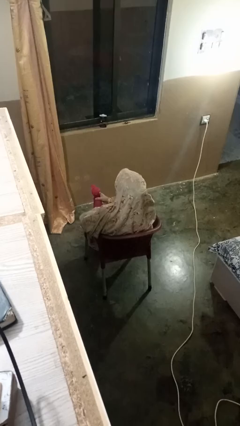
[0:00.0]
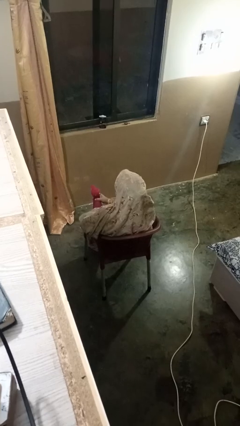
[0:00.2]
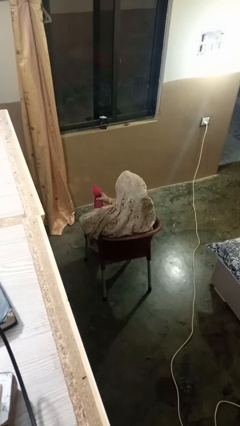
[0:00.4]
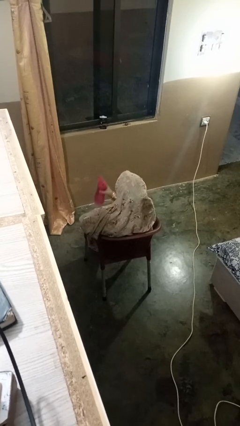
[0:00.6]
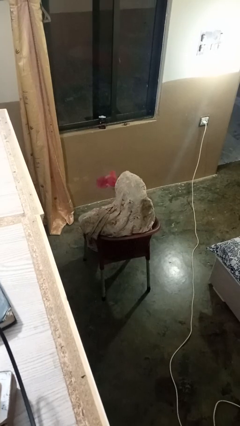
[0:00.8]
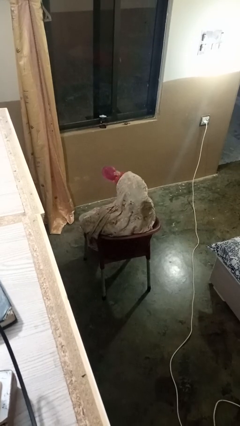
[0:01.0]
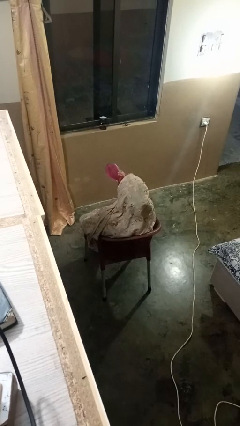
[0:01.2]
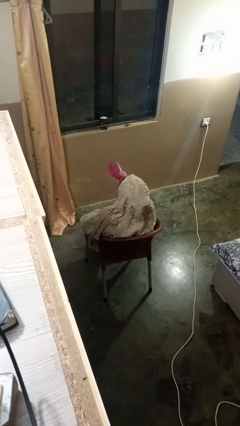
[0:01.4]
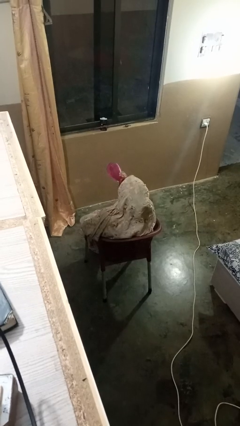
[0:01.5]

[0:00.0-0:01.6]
person drinks from bottle

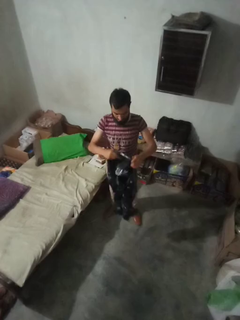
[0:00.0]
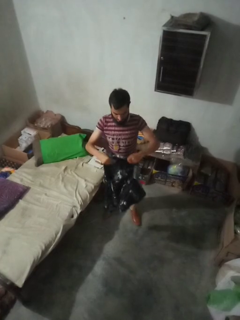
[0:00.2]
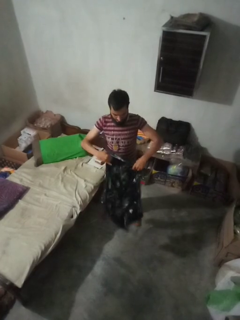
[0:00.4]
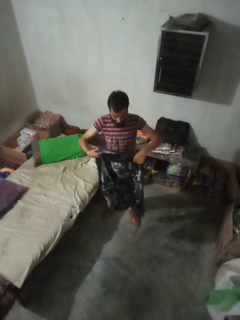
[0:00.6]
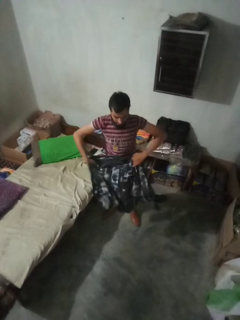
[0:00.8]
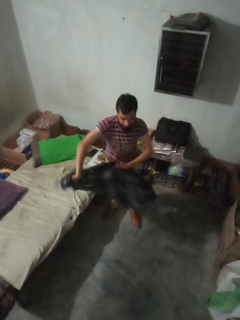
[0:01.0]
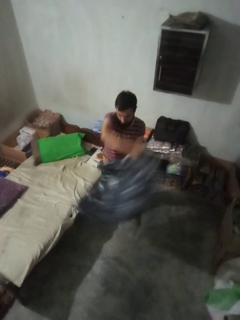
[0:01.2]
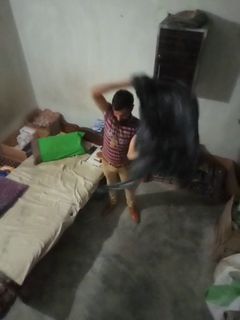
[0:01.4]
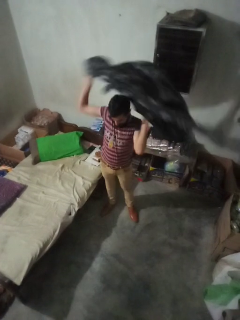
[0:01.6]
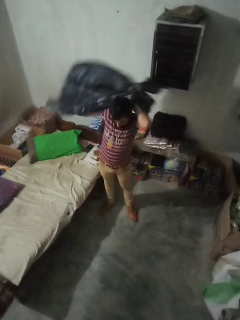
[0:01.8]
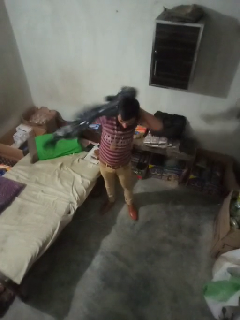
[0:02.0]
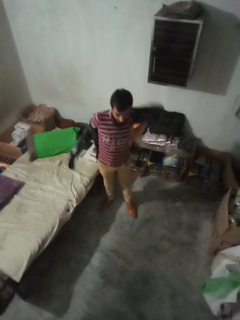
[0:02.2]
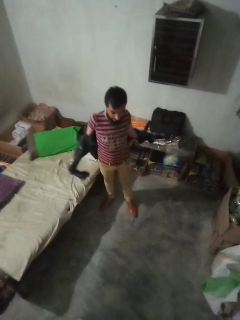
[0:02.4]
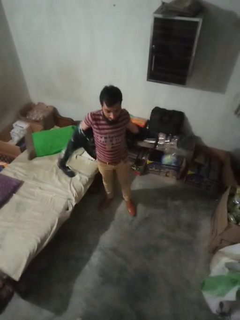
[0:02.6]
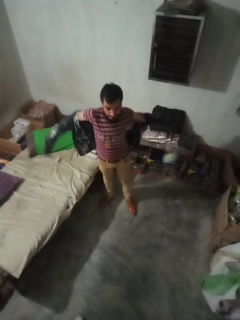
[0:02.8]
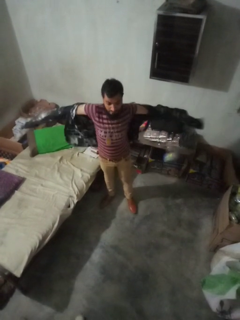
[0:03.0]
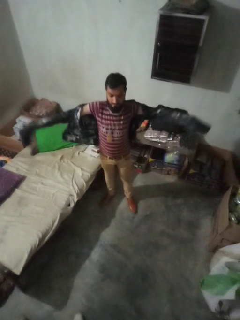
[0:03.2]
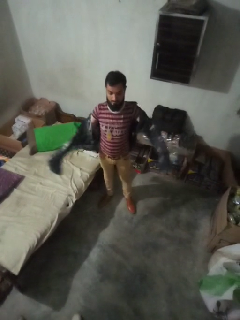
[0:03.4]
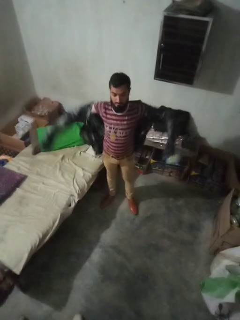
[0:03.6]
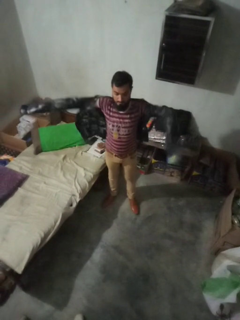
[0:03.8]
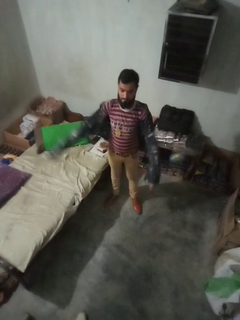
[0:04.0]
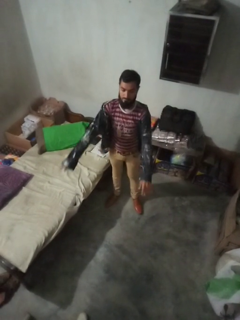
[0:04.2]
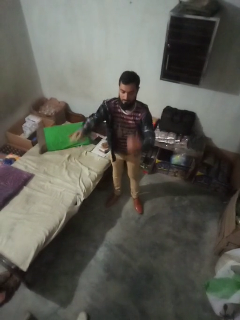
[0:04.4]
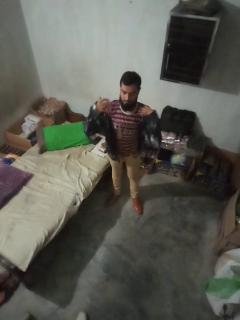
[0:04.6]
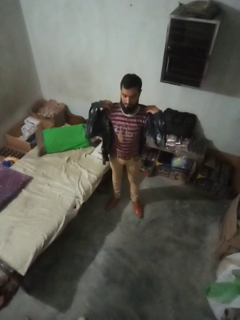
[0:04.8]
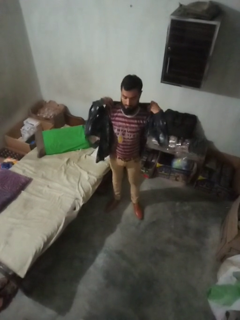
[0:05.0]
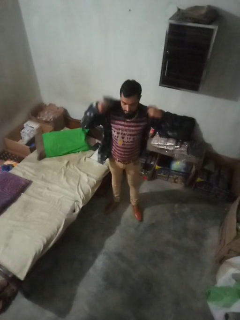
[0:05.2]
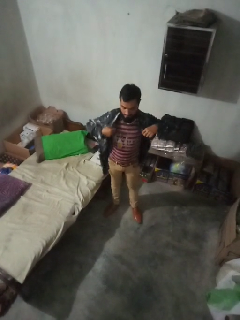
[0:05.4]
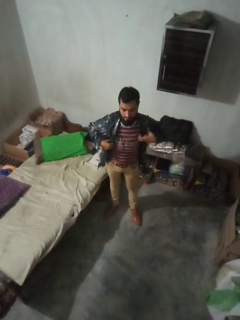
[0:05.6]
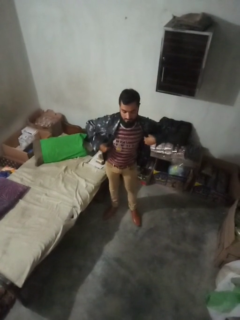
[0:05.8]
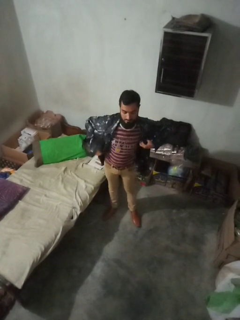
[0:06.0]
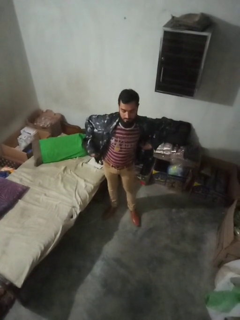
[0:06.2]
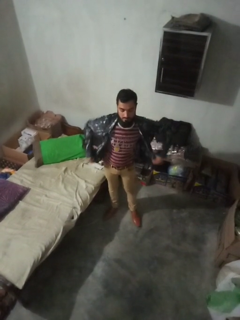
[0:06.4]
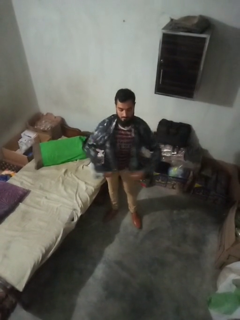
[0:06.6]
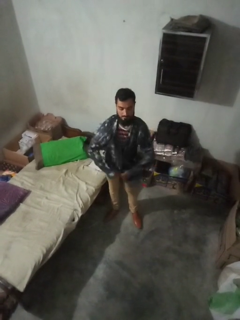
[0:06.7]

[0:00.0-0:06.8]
person puts on shirt

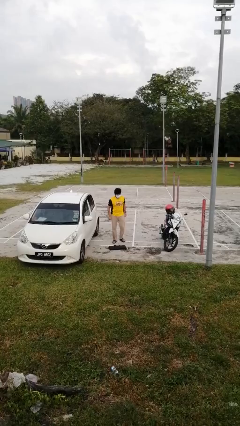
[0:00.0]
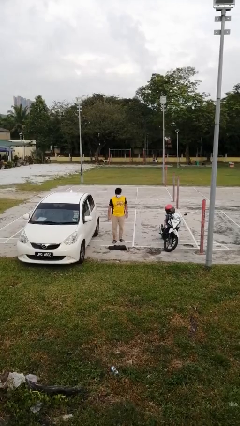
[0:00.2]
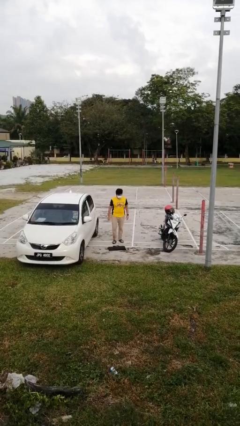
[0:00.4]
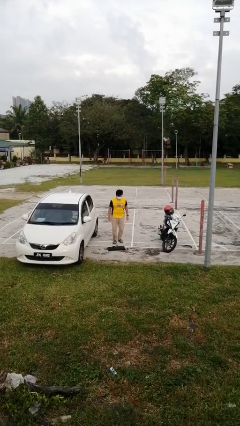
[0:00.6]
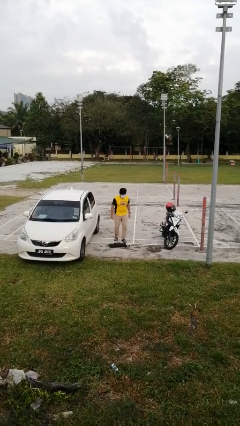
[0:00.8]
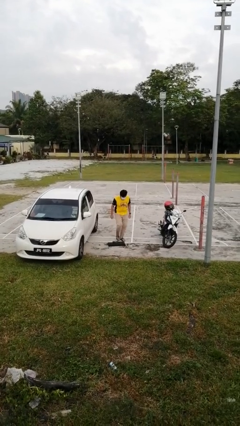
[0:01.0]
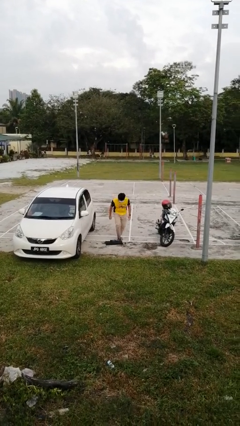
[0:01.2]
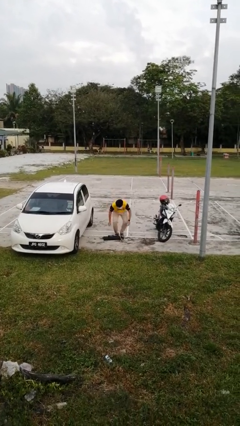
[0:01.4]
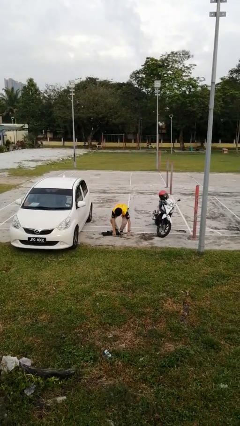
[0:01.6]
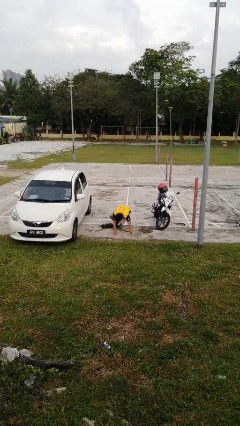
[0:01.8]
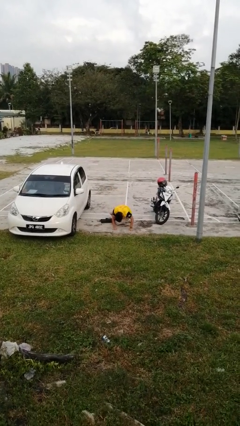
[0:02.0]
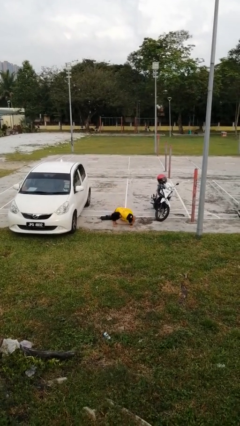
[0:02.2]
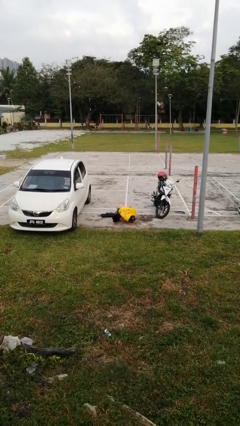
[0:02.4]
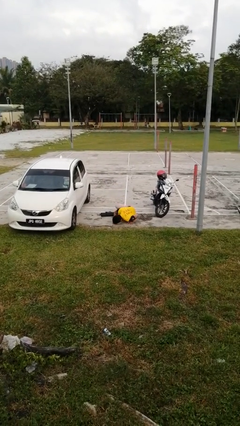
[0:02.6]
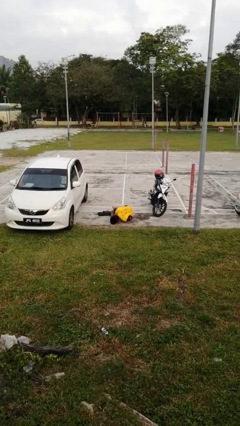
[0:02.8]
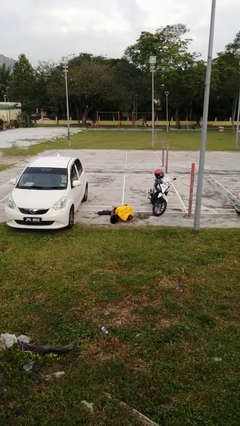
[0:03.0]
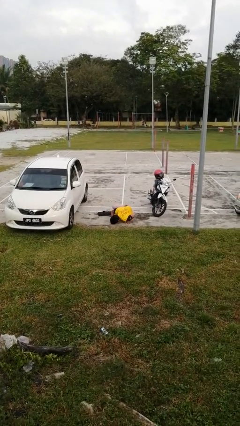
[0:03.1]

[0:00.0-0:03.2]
person trips on object on floor

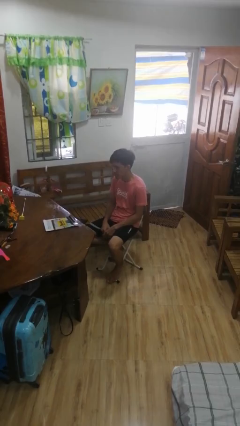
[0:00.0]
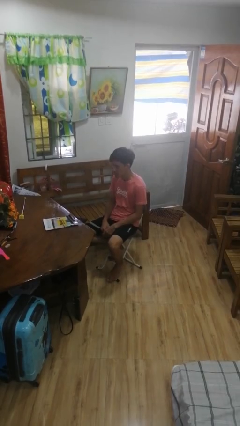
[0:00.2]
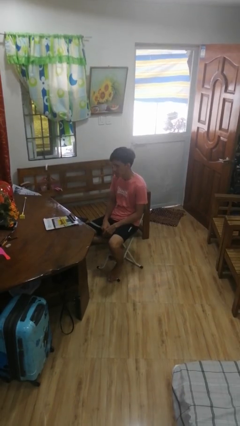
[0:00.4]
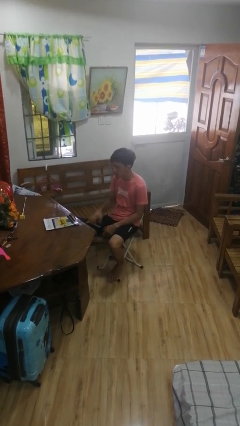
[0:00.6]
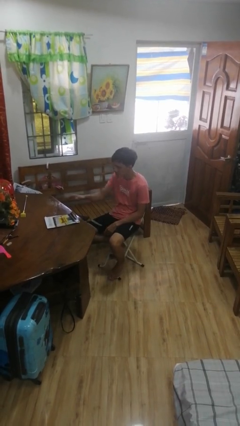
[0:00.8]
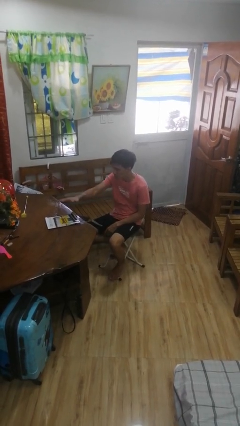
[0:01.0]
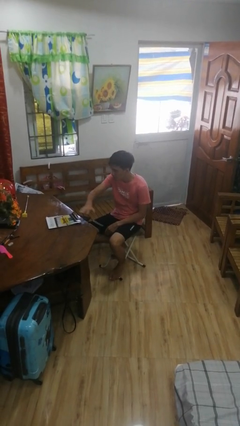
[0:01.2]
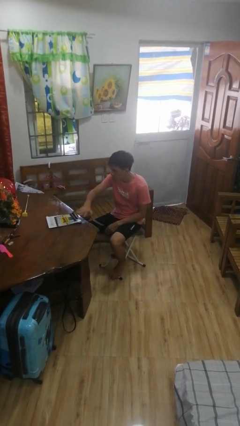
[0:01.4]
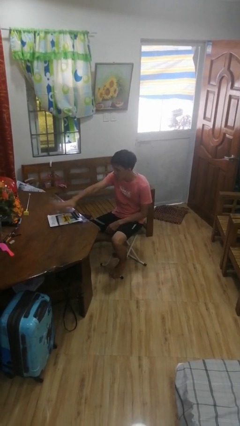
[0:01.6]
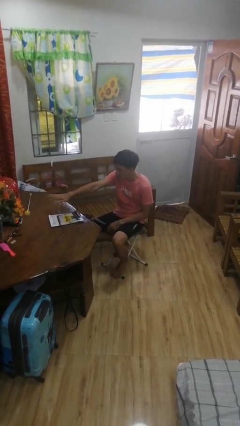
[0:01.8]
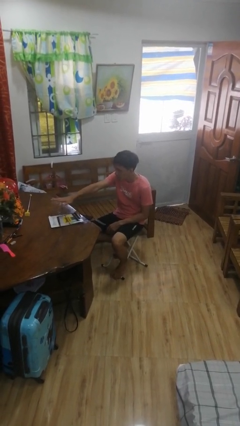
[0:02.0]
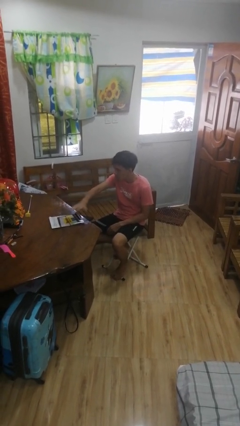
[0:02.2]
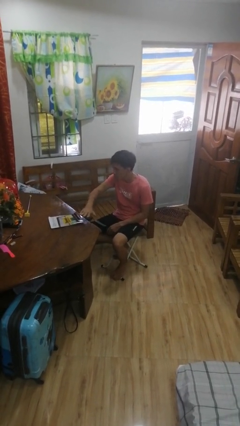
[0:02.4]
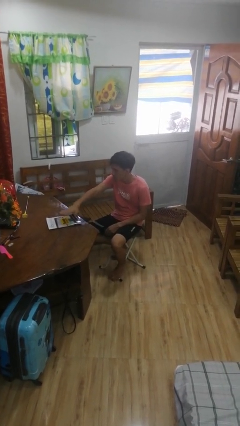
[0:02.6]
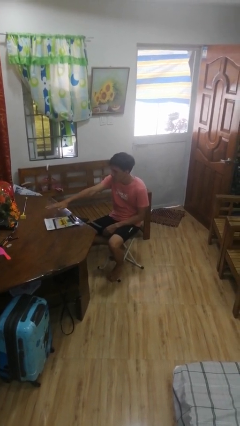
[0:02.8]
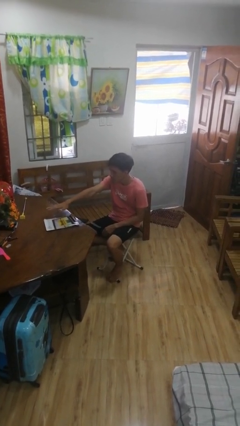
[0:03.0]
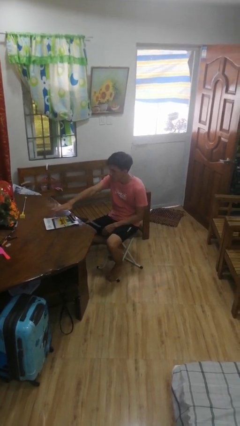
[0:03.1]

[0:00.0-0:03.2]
person waves hand over object

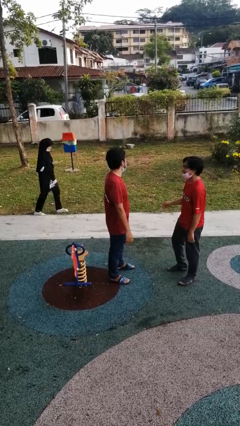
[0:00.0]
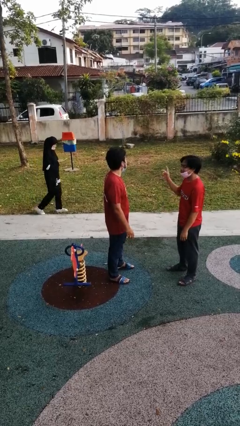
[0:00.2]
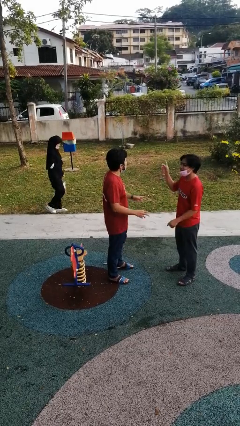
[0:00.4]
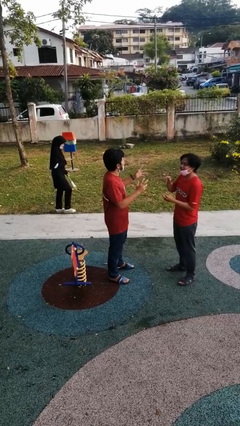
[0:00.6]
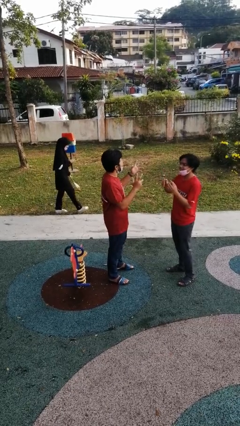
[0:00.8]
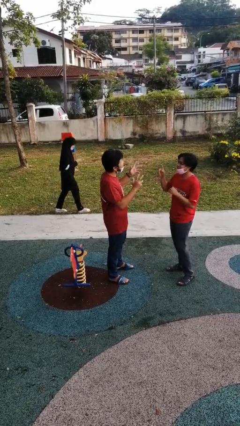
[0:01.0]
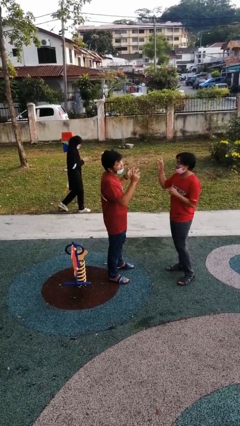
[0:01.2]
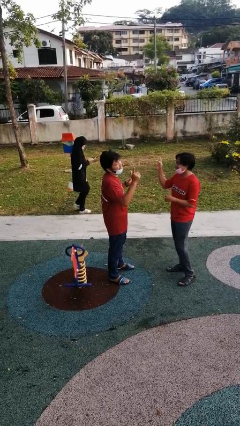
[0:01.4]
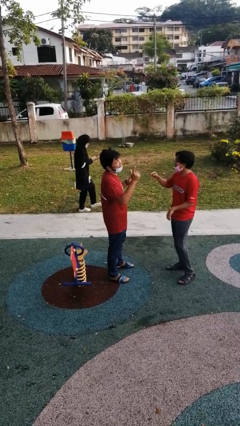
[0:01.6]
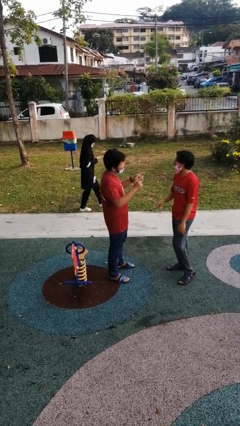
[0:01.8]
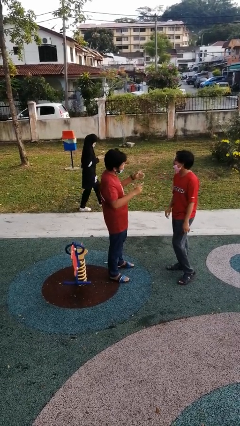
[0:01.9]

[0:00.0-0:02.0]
person talks to person

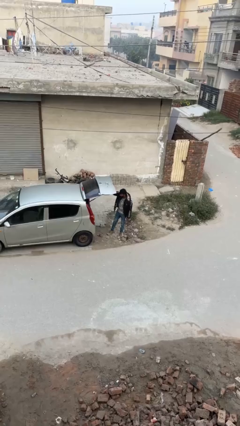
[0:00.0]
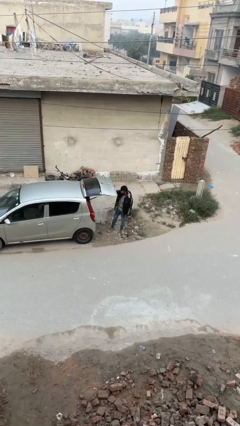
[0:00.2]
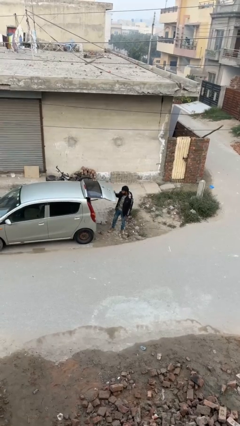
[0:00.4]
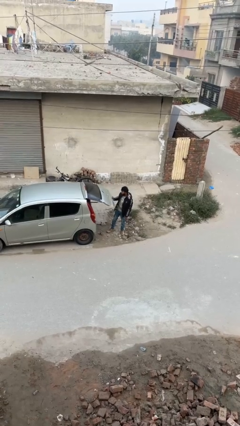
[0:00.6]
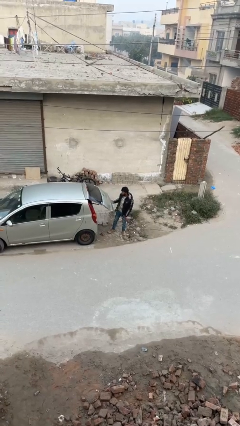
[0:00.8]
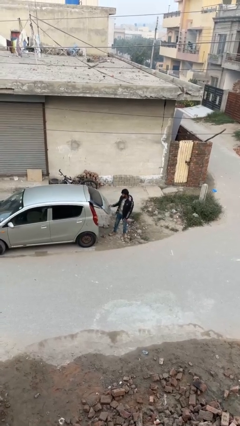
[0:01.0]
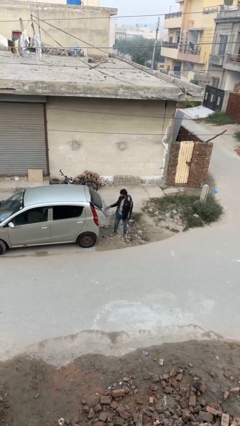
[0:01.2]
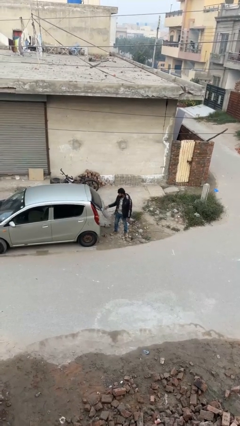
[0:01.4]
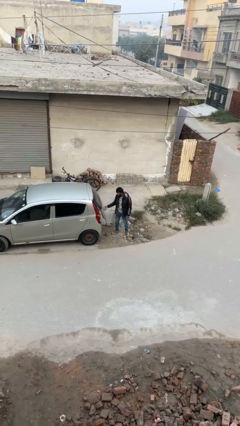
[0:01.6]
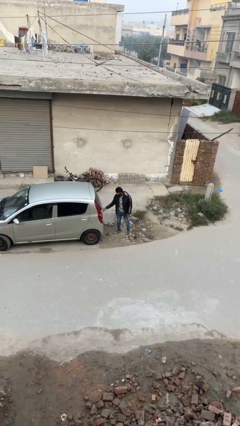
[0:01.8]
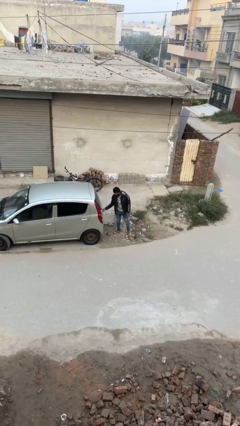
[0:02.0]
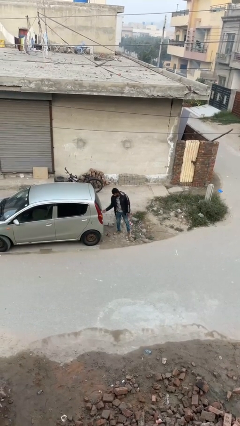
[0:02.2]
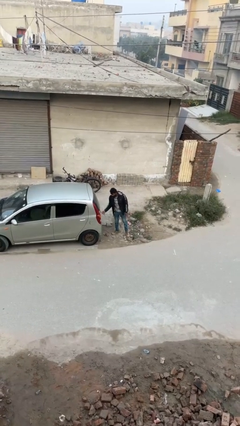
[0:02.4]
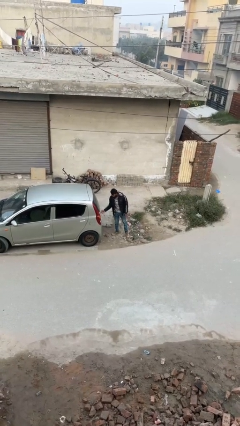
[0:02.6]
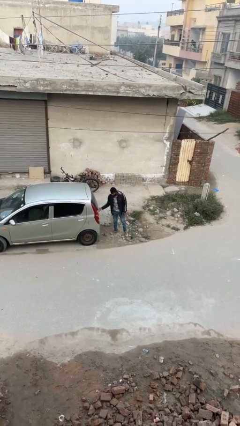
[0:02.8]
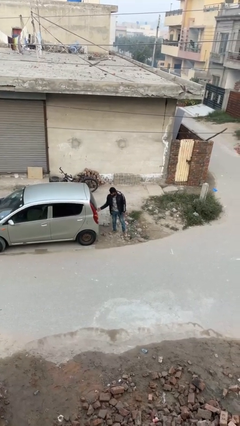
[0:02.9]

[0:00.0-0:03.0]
person closes car trunk
